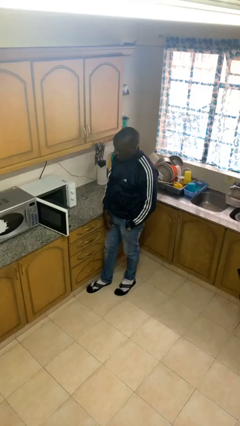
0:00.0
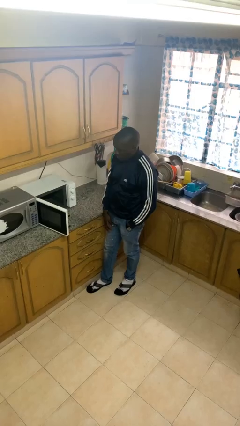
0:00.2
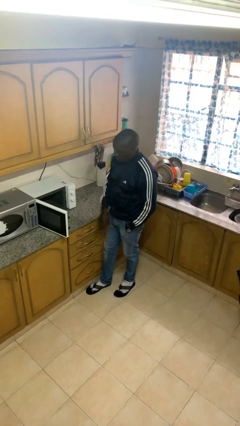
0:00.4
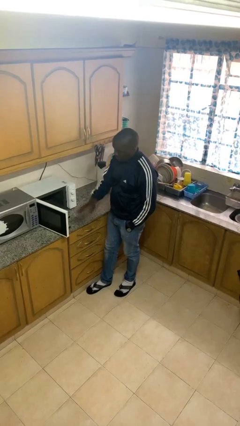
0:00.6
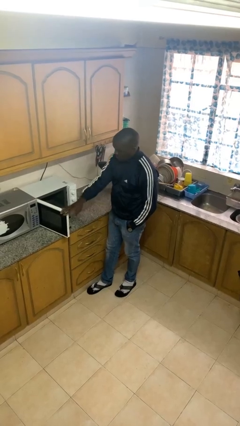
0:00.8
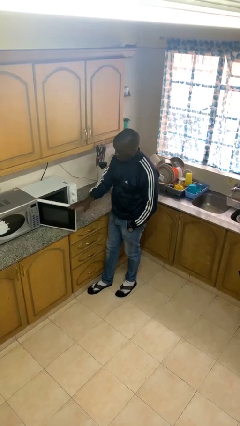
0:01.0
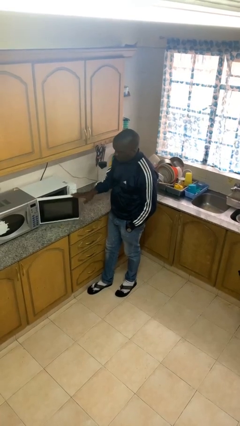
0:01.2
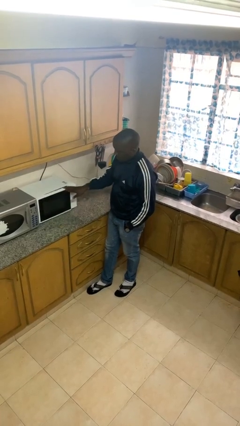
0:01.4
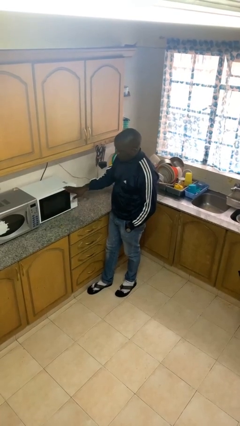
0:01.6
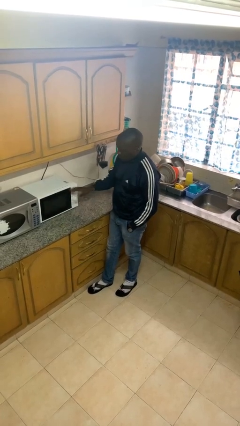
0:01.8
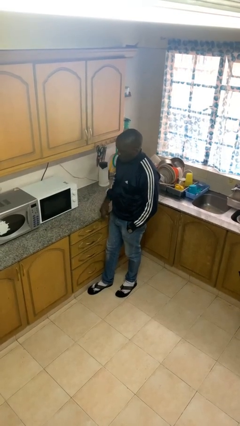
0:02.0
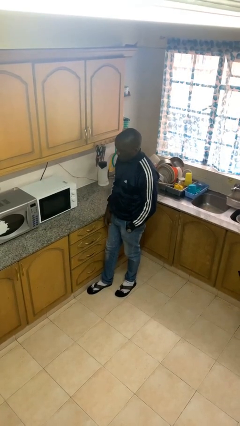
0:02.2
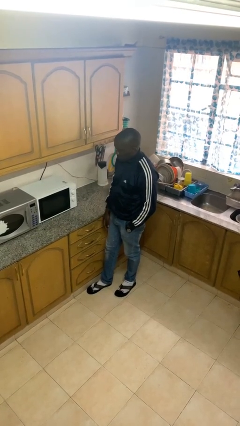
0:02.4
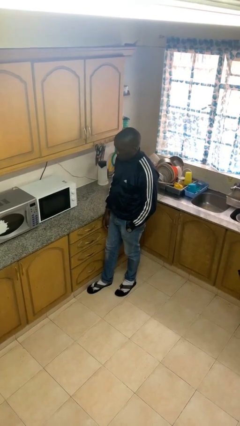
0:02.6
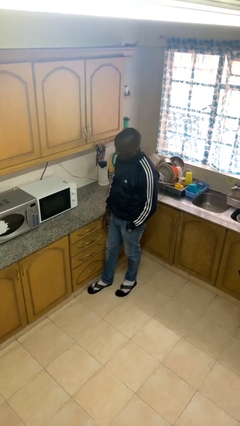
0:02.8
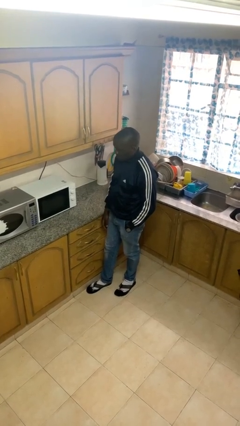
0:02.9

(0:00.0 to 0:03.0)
person closes microwave

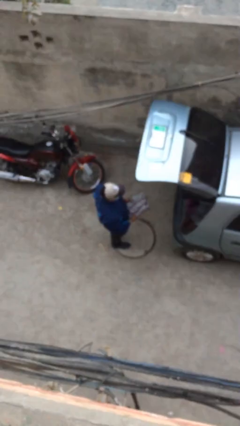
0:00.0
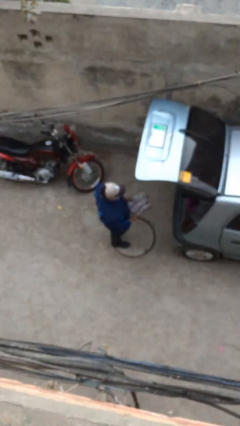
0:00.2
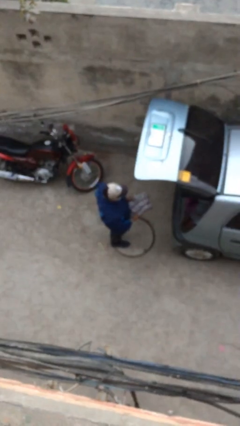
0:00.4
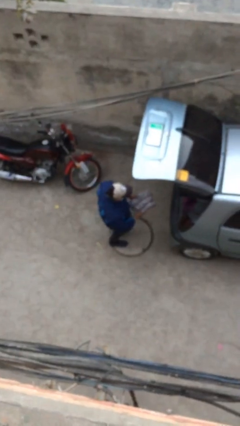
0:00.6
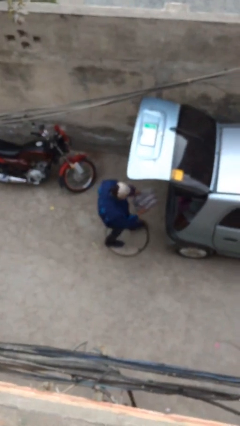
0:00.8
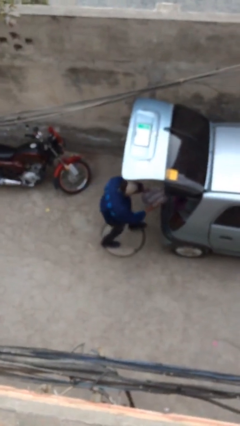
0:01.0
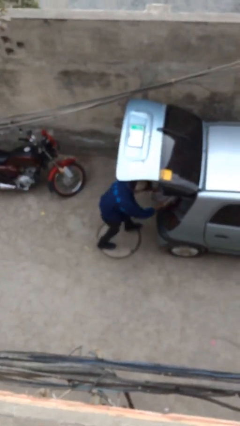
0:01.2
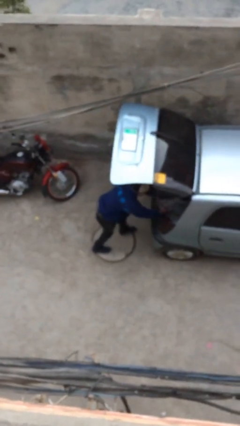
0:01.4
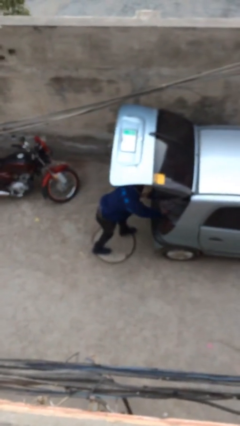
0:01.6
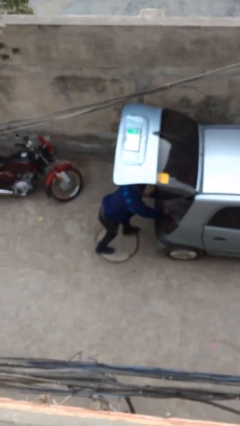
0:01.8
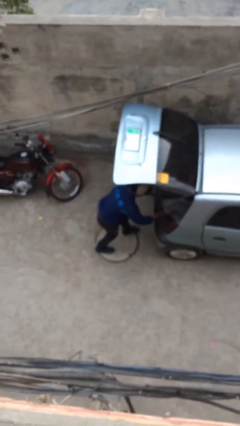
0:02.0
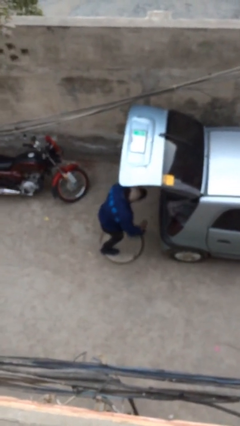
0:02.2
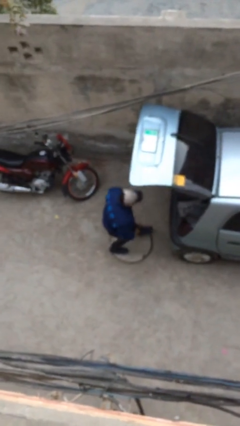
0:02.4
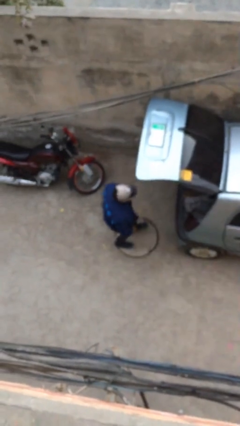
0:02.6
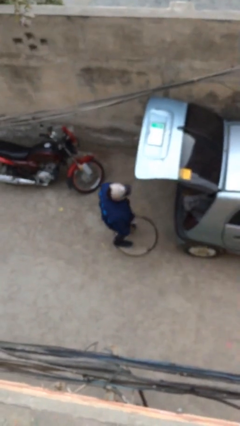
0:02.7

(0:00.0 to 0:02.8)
person loads car

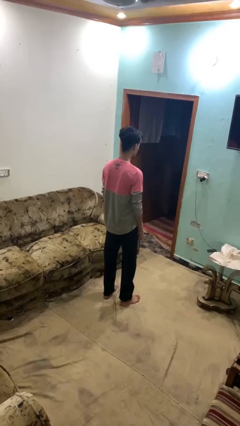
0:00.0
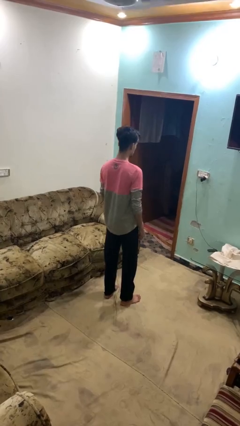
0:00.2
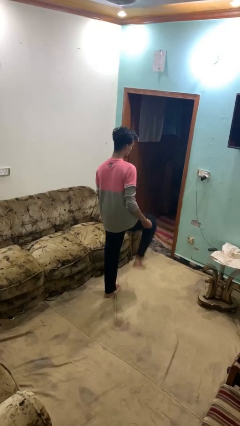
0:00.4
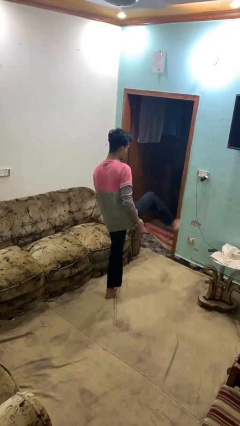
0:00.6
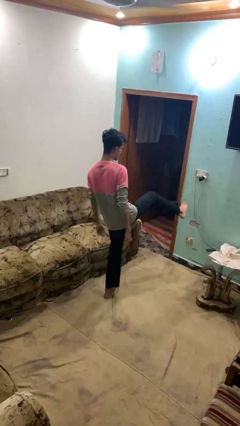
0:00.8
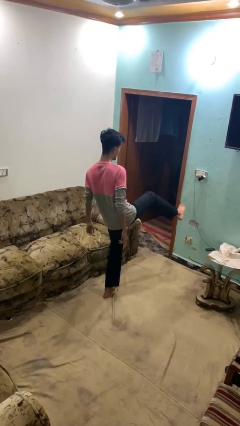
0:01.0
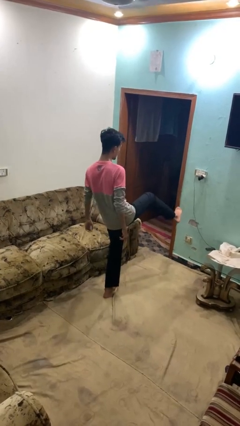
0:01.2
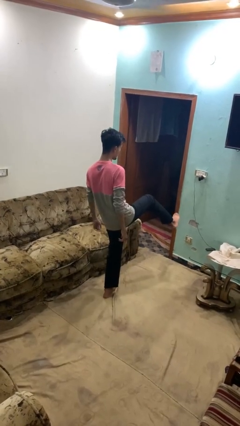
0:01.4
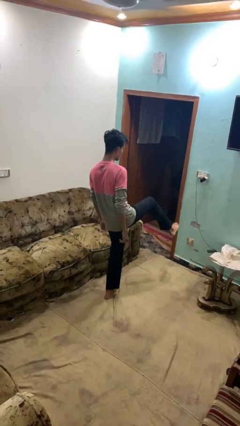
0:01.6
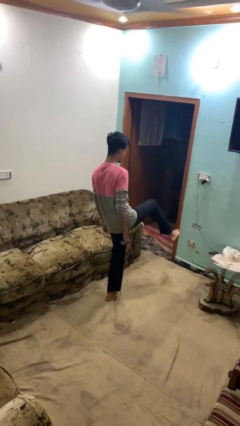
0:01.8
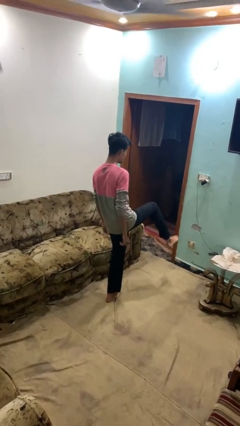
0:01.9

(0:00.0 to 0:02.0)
person karate kicks

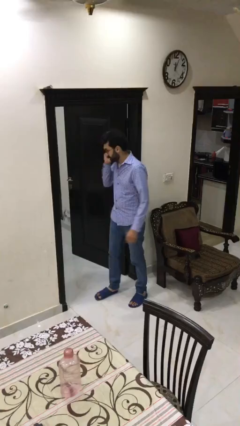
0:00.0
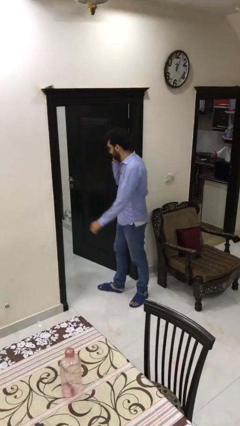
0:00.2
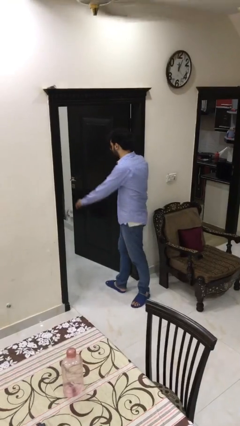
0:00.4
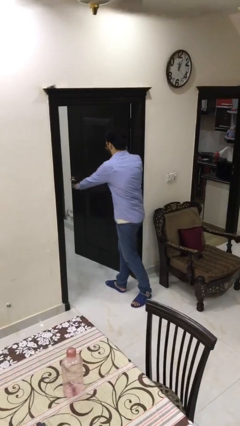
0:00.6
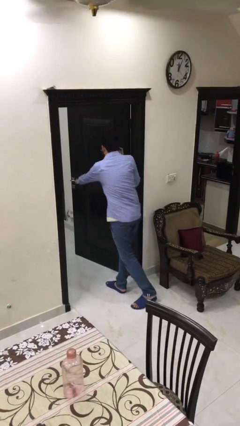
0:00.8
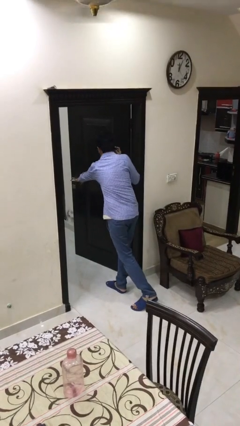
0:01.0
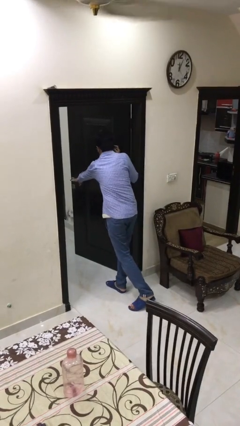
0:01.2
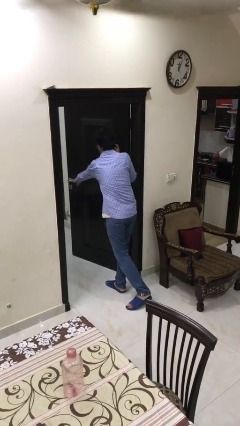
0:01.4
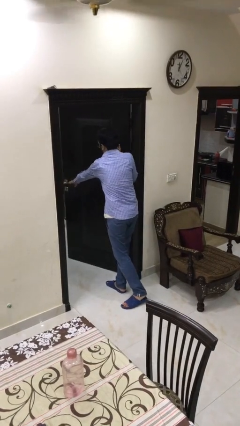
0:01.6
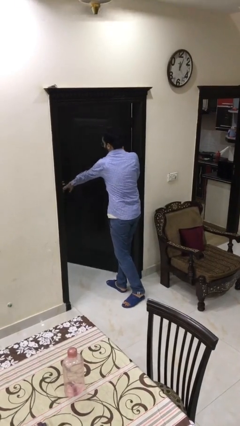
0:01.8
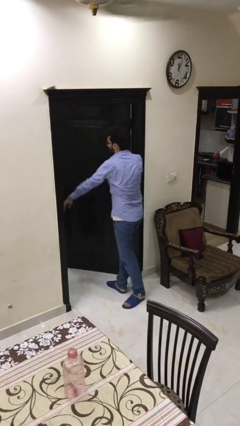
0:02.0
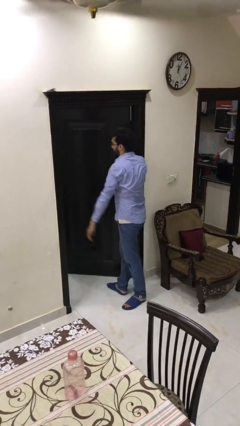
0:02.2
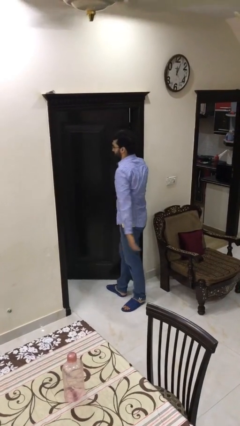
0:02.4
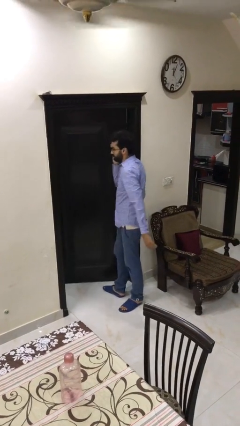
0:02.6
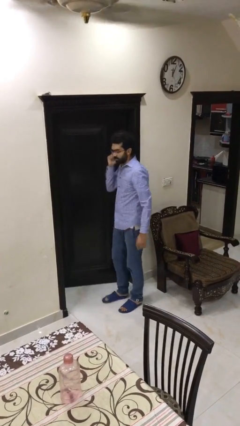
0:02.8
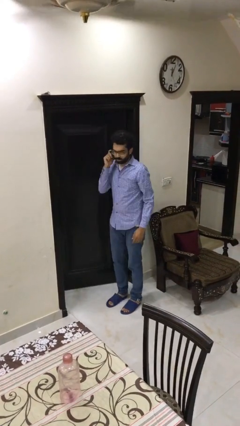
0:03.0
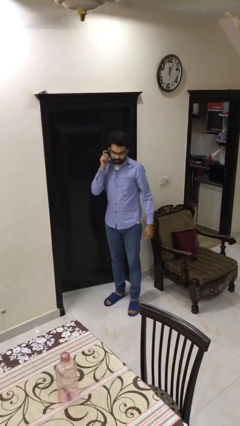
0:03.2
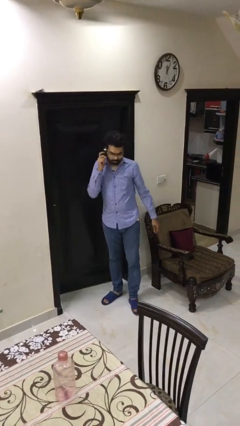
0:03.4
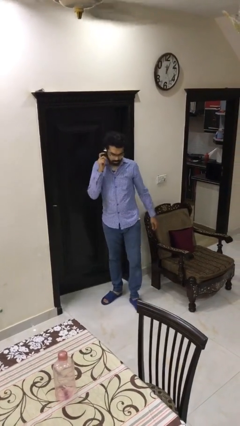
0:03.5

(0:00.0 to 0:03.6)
person closes facility door

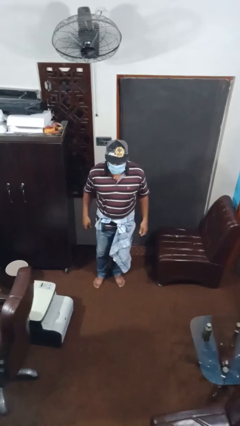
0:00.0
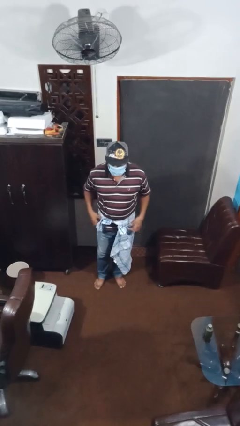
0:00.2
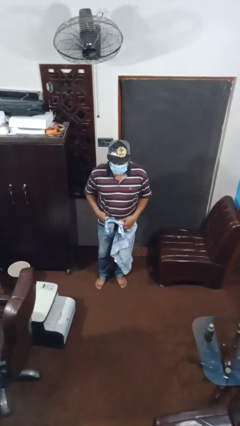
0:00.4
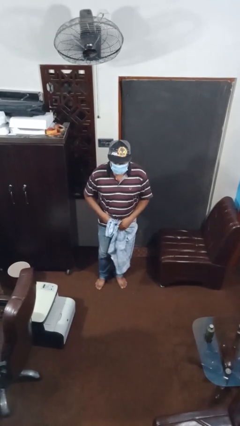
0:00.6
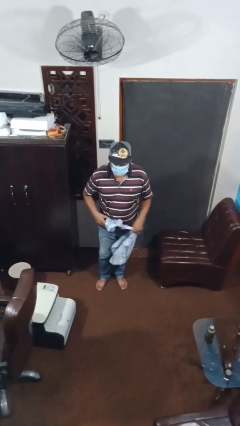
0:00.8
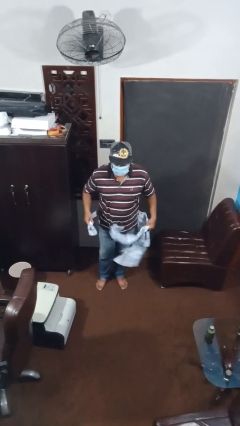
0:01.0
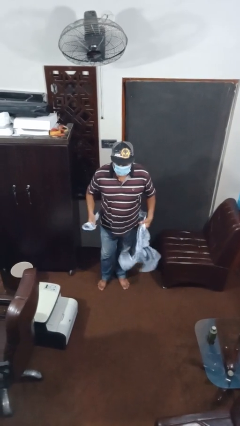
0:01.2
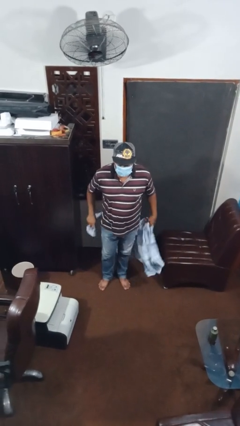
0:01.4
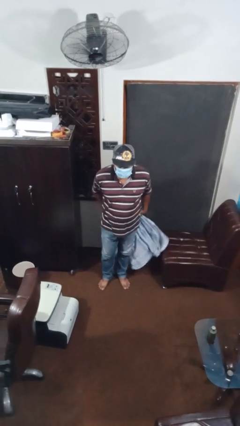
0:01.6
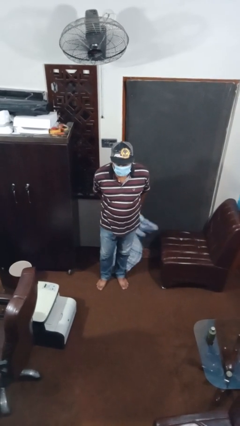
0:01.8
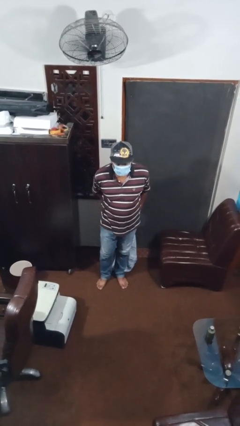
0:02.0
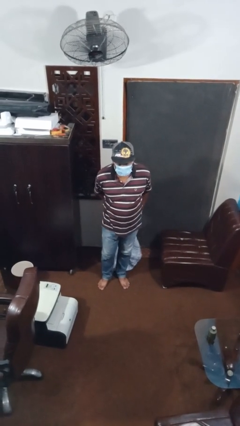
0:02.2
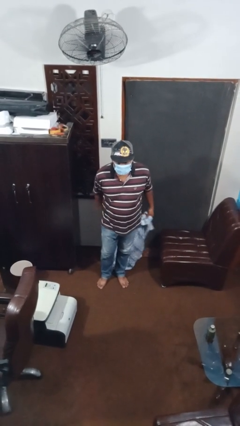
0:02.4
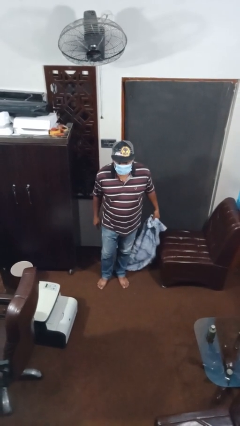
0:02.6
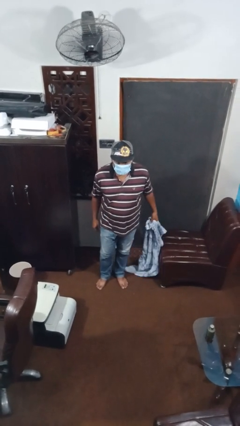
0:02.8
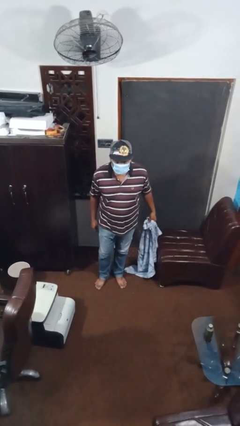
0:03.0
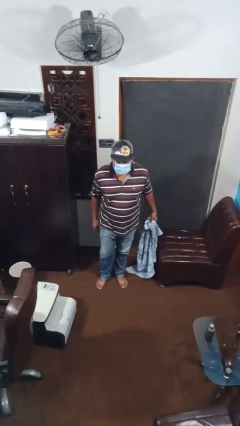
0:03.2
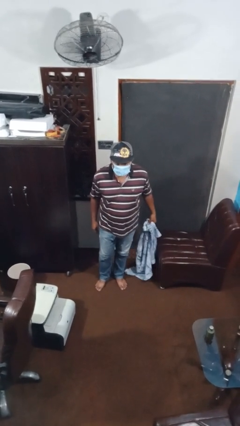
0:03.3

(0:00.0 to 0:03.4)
person unties jacket around waist

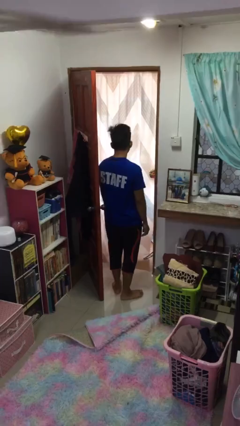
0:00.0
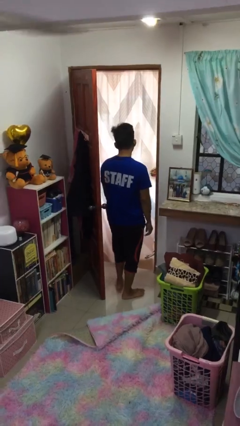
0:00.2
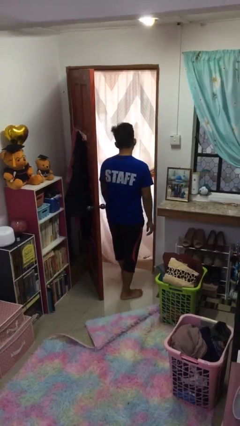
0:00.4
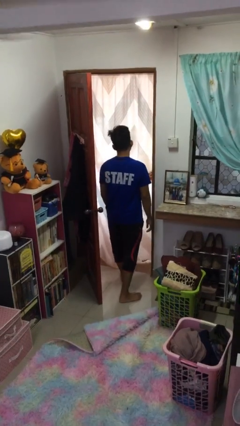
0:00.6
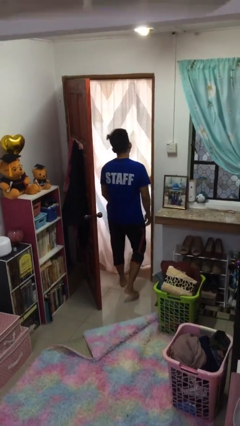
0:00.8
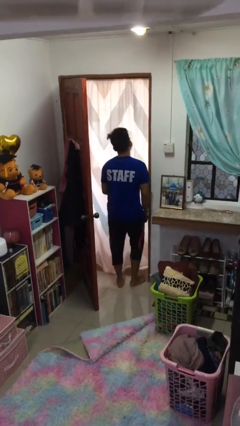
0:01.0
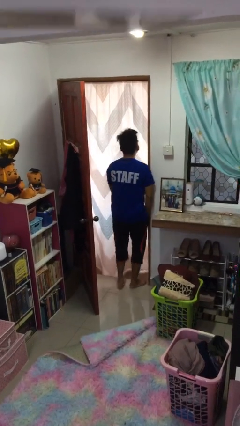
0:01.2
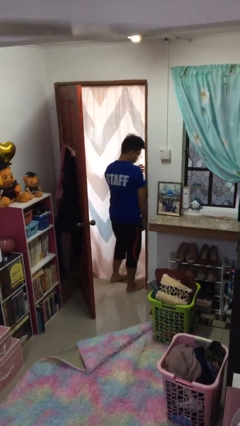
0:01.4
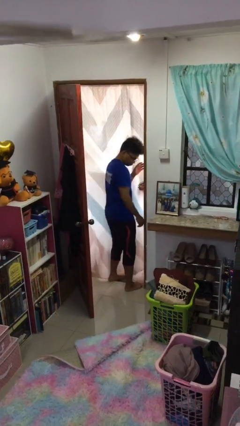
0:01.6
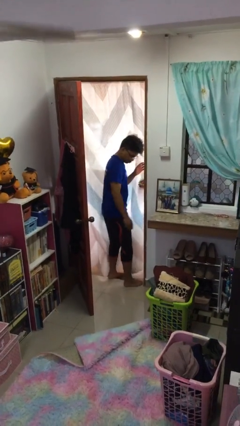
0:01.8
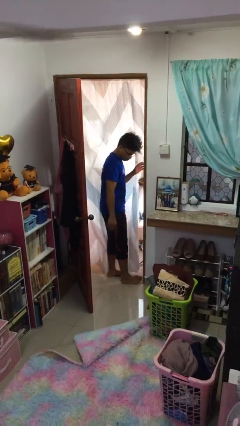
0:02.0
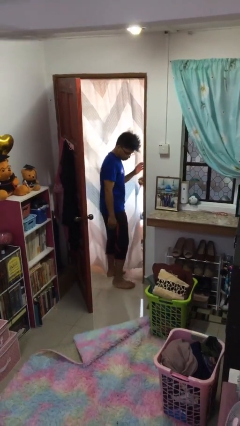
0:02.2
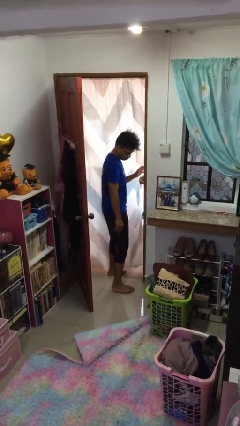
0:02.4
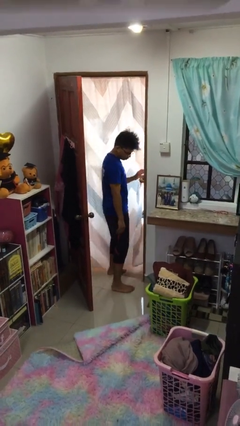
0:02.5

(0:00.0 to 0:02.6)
person bumps into wall
